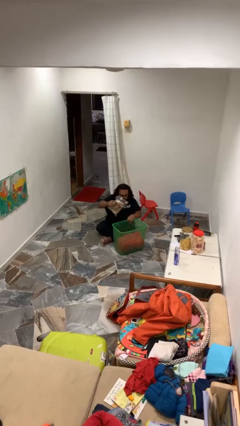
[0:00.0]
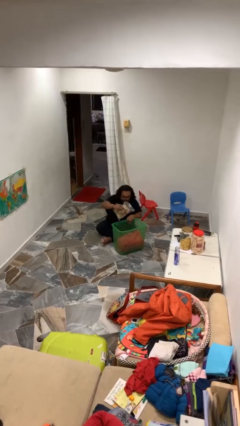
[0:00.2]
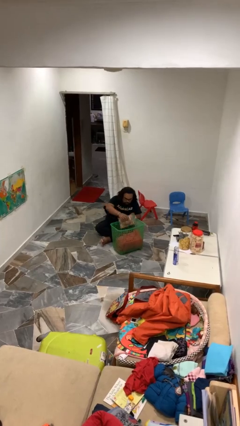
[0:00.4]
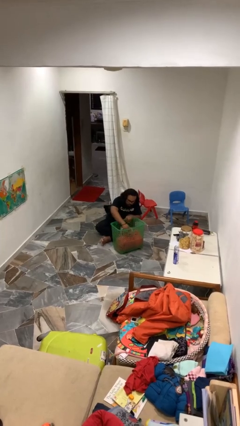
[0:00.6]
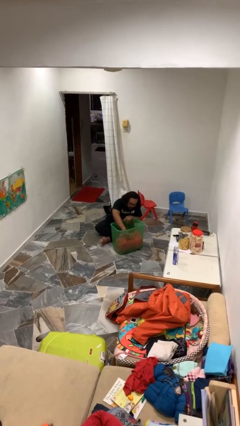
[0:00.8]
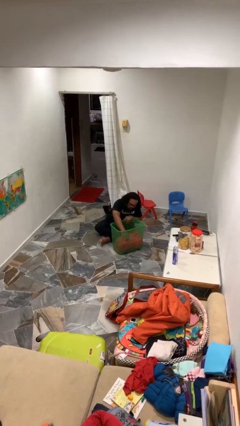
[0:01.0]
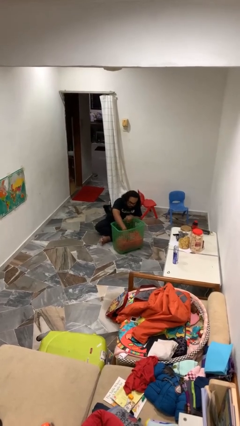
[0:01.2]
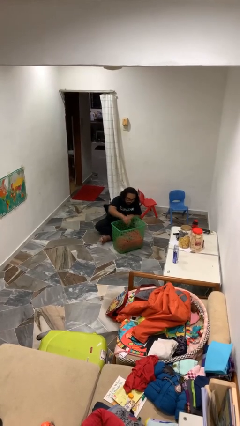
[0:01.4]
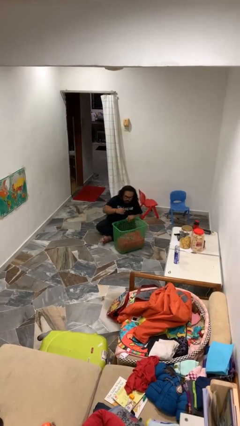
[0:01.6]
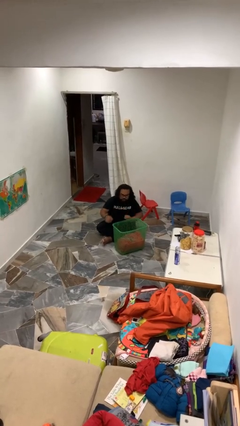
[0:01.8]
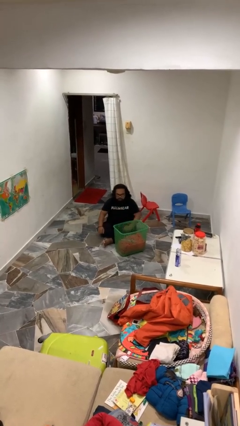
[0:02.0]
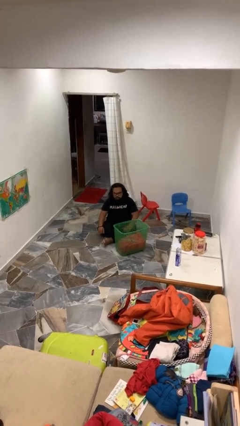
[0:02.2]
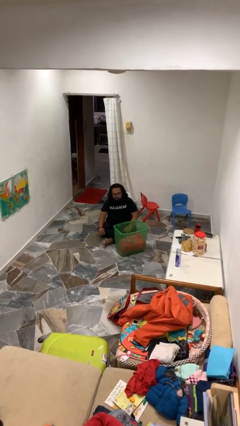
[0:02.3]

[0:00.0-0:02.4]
person puts object into basket

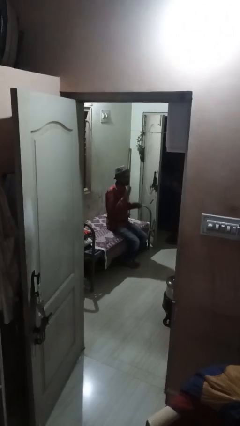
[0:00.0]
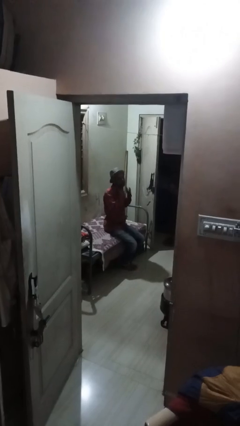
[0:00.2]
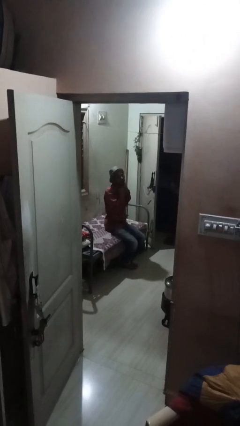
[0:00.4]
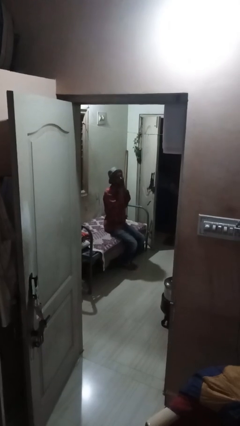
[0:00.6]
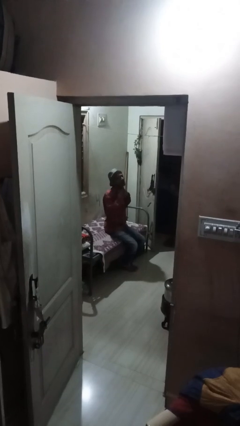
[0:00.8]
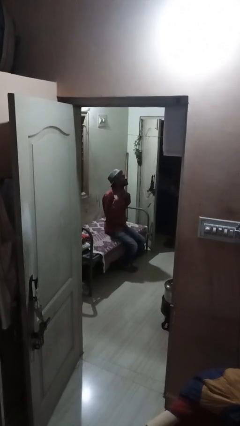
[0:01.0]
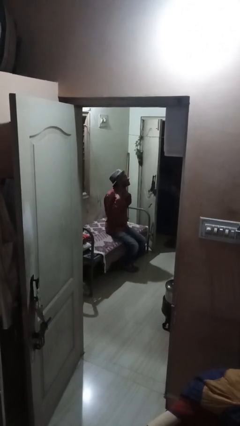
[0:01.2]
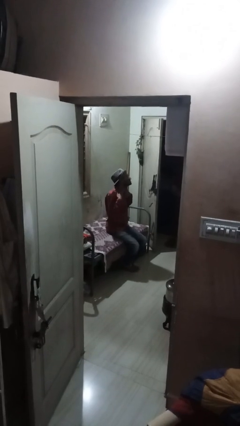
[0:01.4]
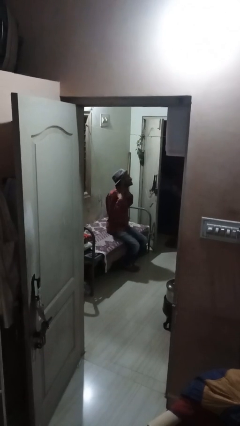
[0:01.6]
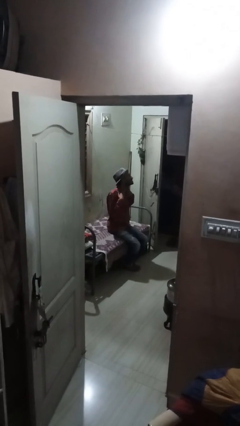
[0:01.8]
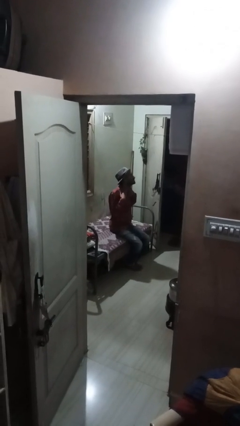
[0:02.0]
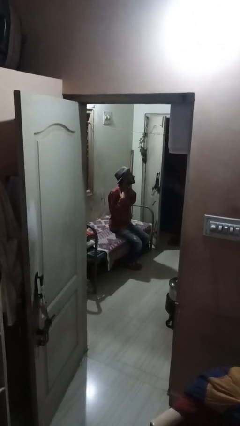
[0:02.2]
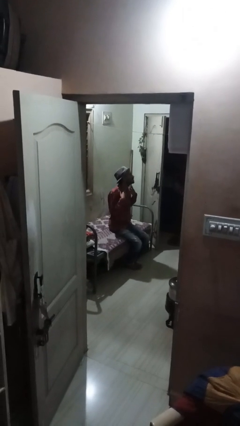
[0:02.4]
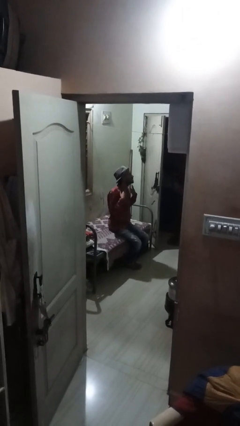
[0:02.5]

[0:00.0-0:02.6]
person rubs neck

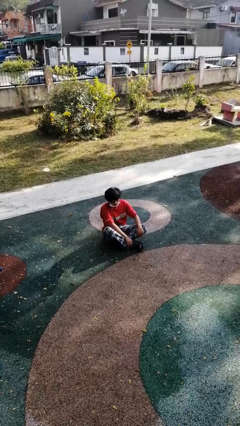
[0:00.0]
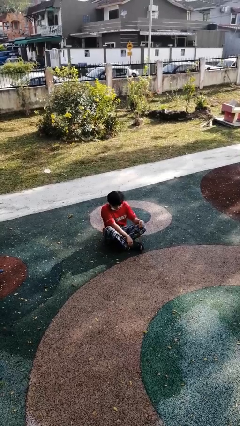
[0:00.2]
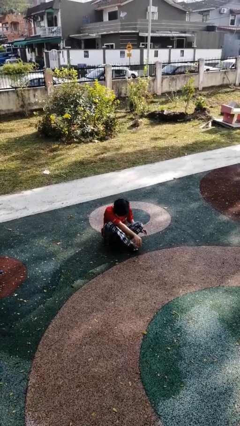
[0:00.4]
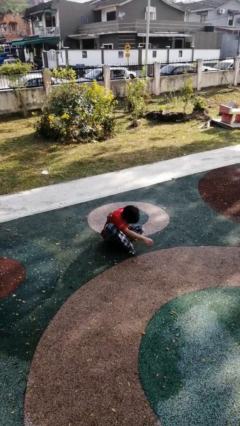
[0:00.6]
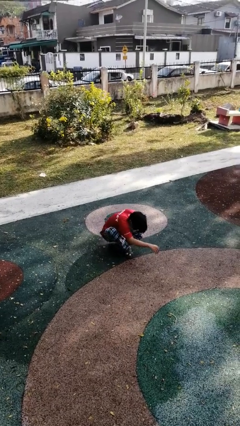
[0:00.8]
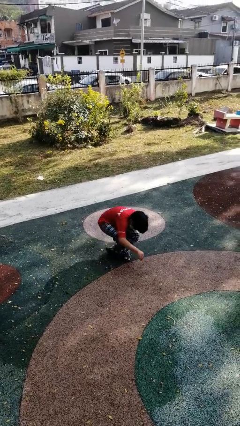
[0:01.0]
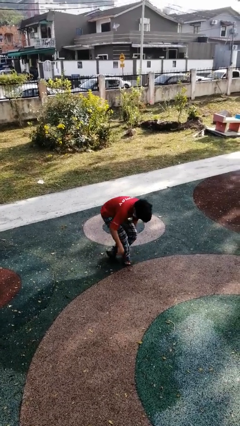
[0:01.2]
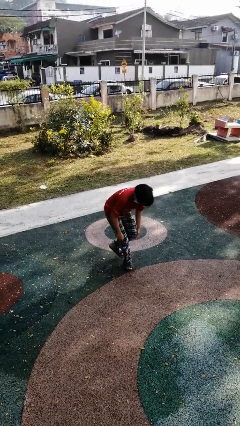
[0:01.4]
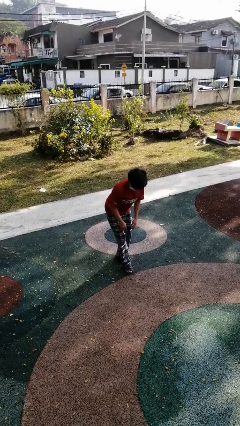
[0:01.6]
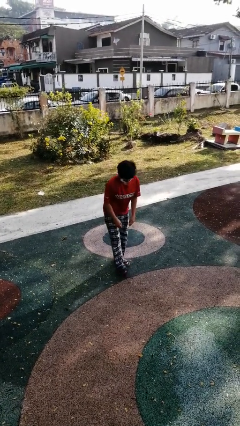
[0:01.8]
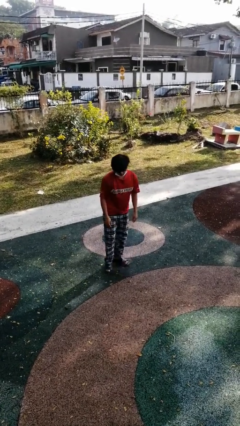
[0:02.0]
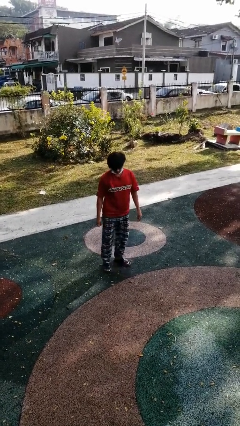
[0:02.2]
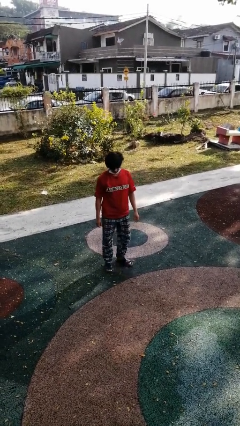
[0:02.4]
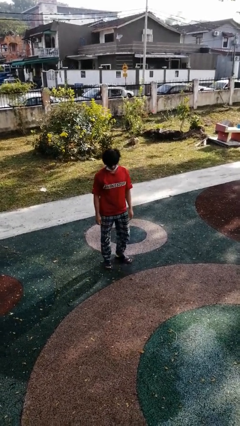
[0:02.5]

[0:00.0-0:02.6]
person stands up from floor

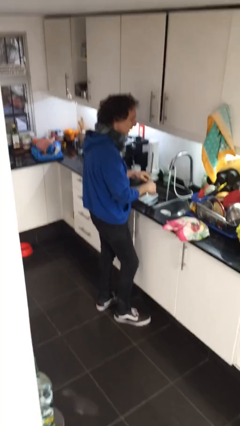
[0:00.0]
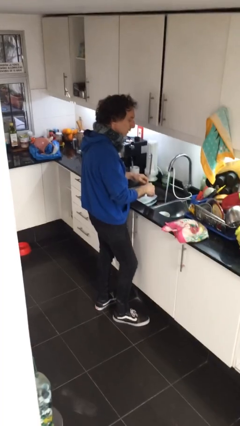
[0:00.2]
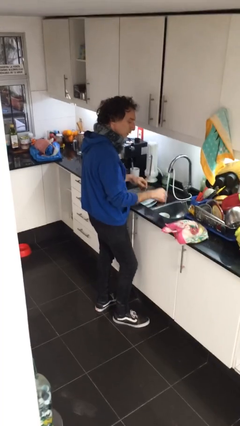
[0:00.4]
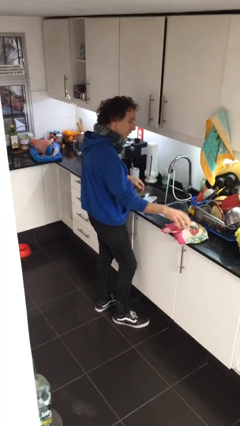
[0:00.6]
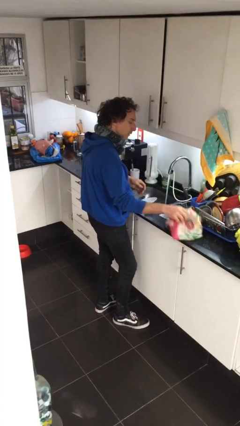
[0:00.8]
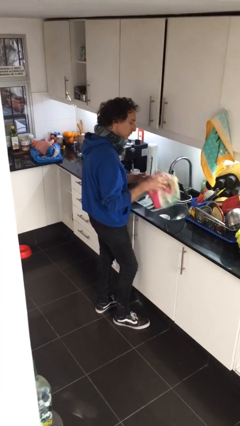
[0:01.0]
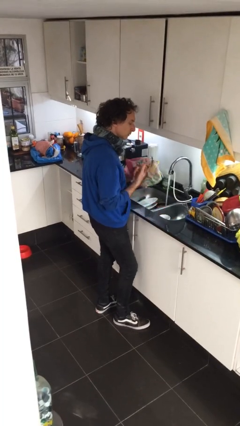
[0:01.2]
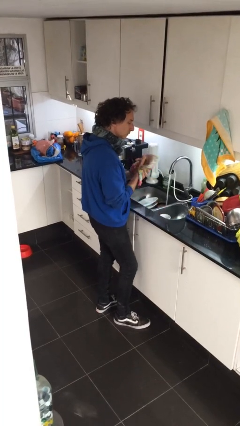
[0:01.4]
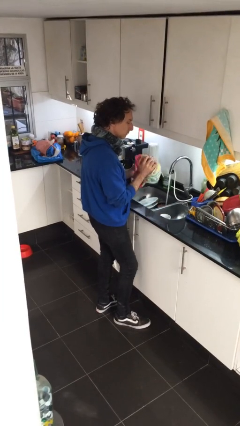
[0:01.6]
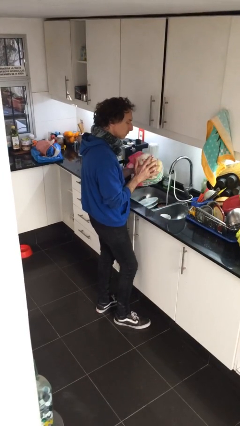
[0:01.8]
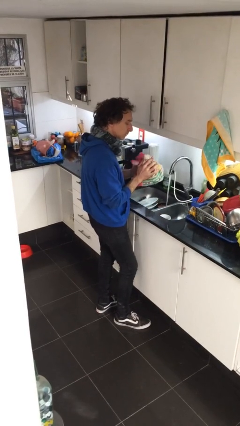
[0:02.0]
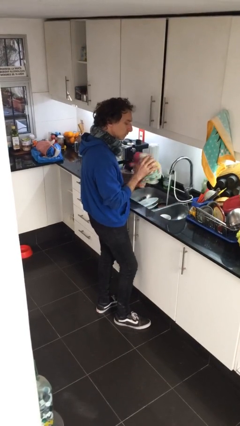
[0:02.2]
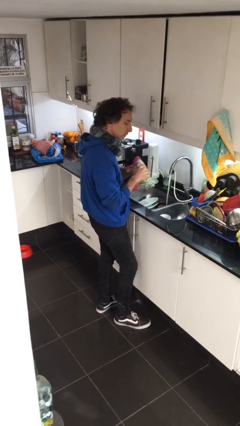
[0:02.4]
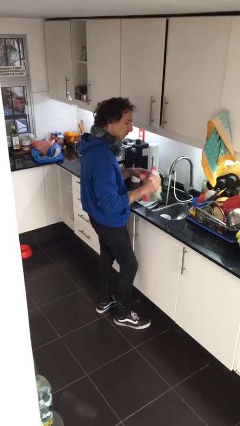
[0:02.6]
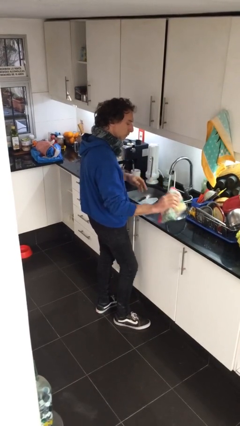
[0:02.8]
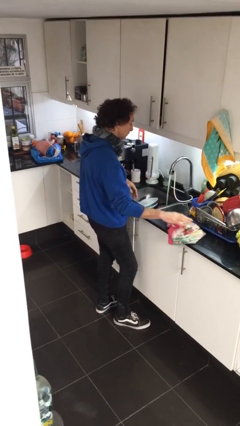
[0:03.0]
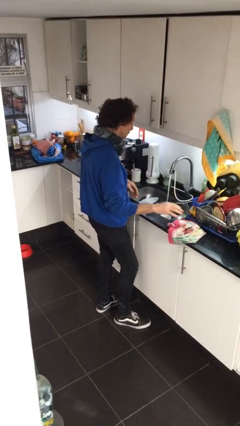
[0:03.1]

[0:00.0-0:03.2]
person dries hands with towel

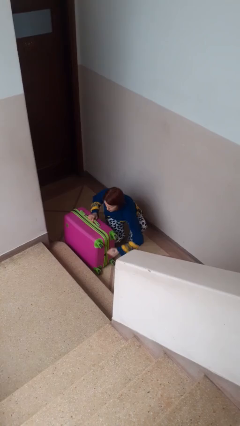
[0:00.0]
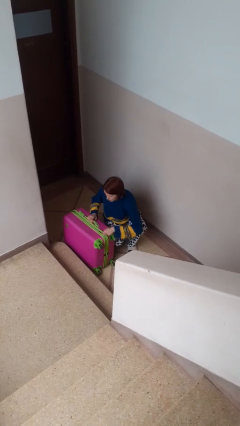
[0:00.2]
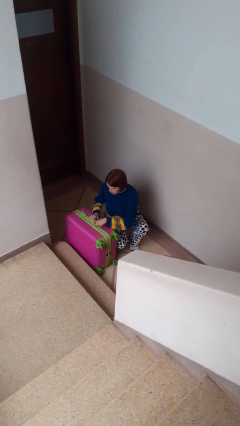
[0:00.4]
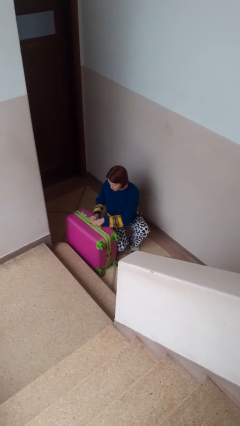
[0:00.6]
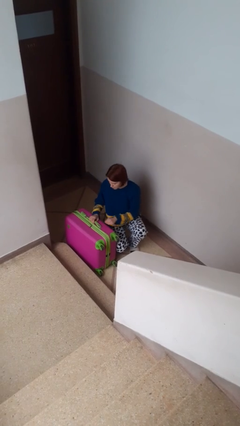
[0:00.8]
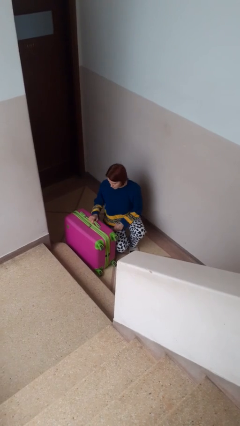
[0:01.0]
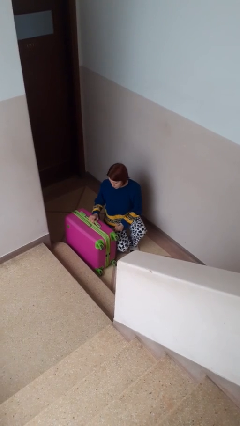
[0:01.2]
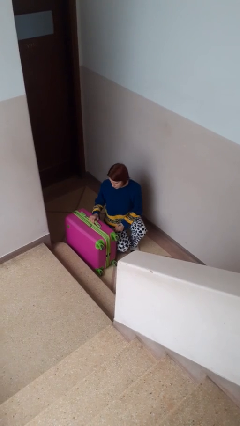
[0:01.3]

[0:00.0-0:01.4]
person closes suitcase

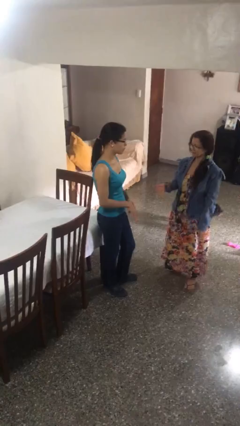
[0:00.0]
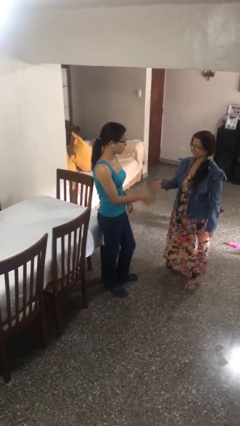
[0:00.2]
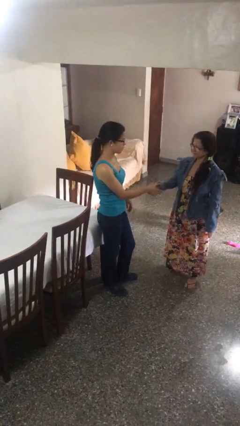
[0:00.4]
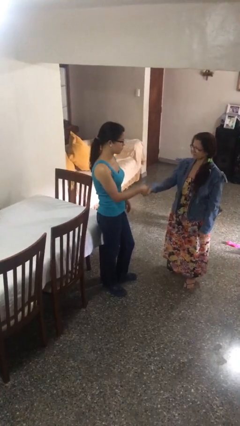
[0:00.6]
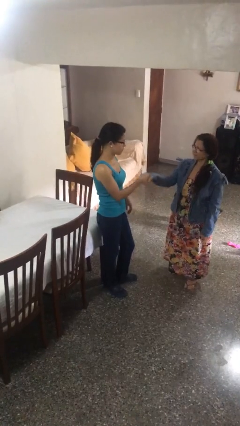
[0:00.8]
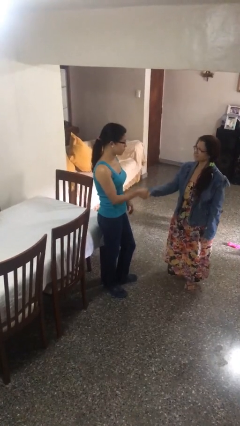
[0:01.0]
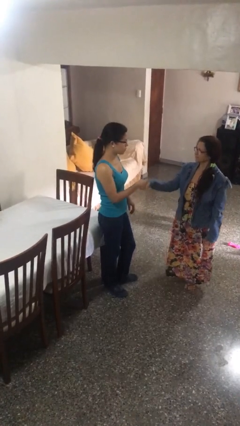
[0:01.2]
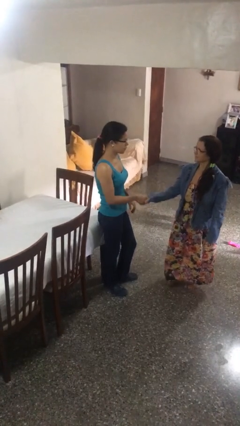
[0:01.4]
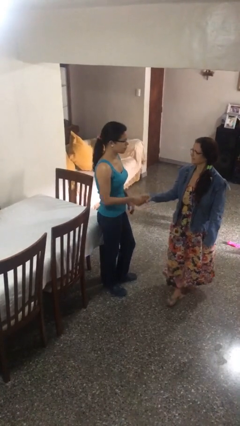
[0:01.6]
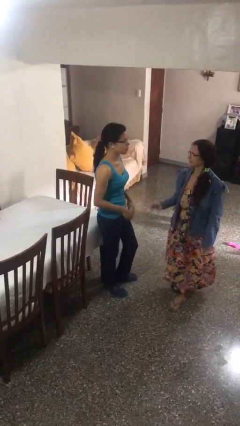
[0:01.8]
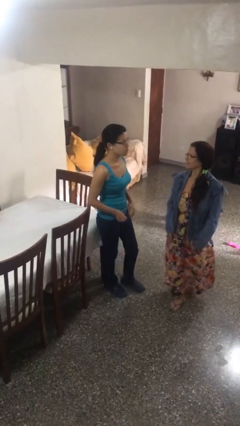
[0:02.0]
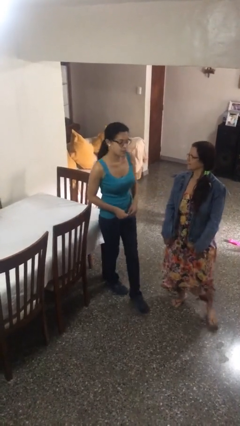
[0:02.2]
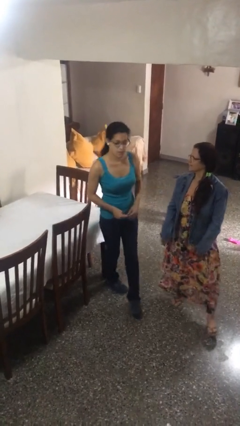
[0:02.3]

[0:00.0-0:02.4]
person shakes hand

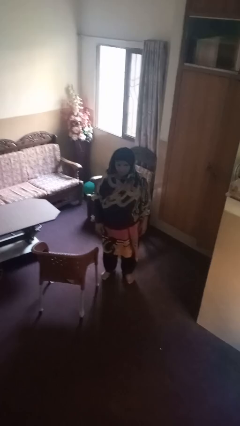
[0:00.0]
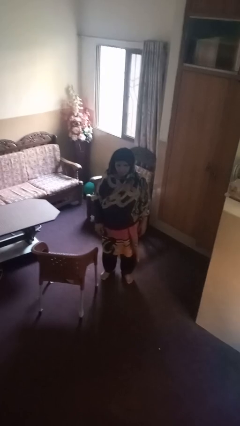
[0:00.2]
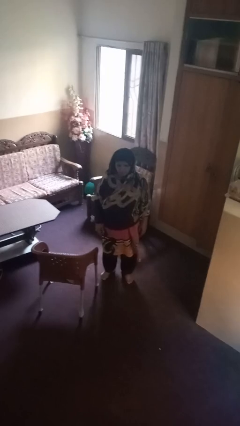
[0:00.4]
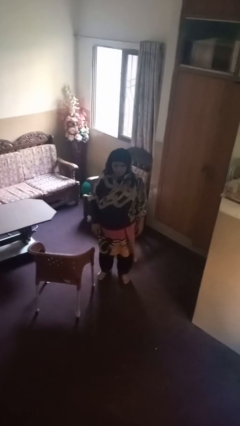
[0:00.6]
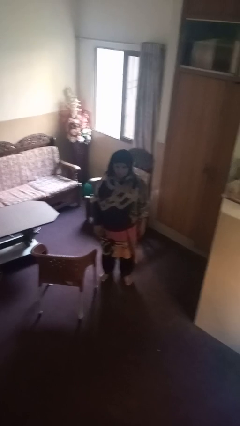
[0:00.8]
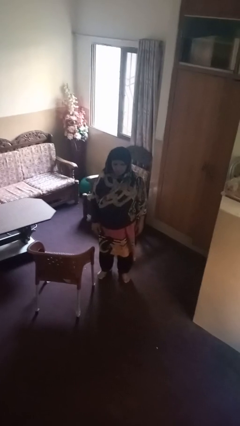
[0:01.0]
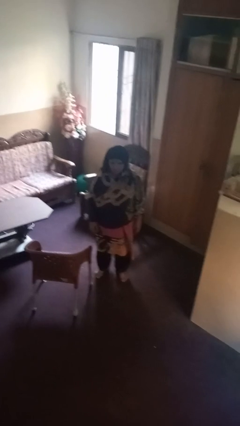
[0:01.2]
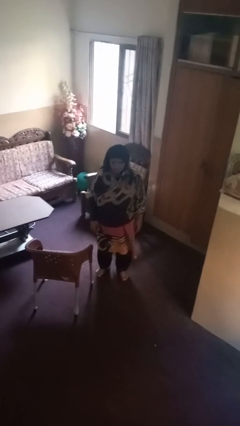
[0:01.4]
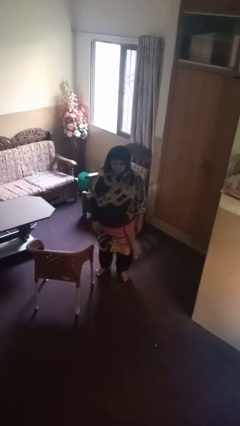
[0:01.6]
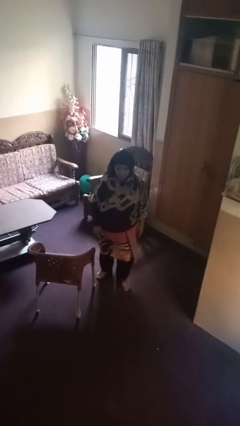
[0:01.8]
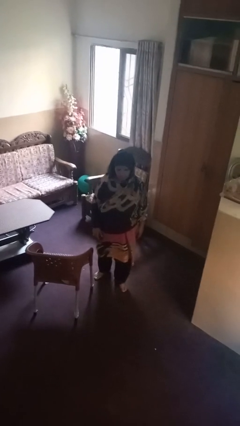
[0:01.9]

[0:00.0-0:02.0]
person trips on object on floor
